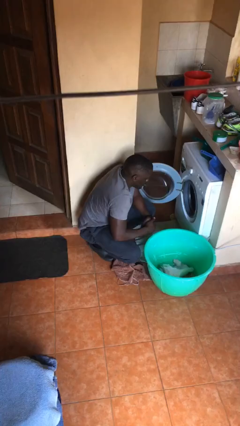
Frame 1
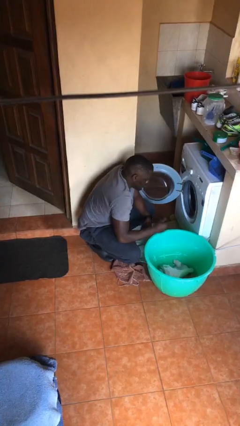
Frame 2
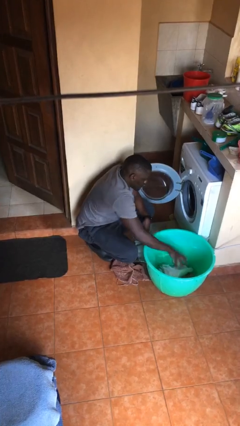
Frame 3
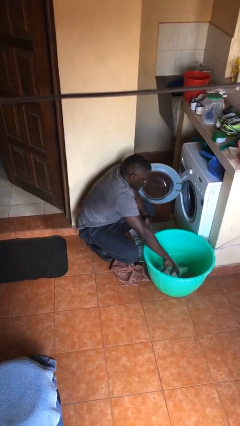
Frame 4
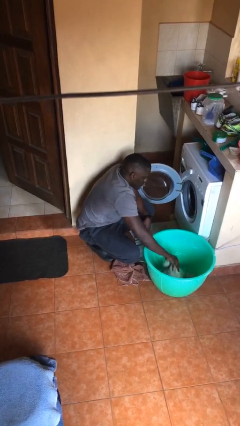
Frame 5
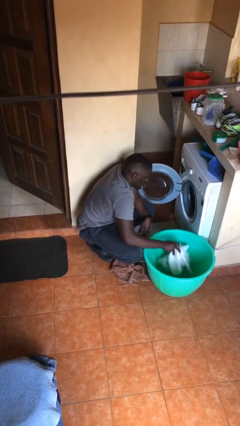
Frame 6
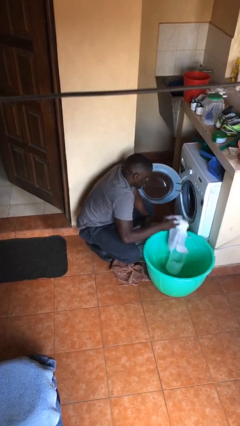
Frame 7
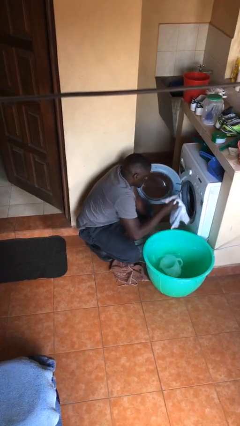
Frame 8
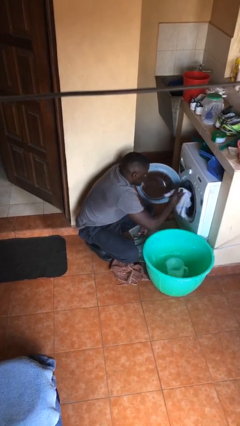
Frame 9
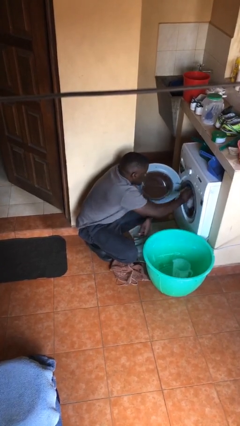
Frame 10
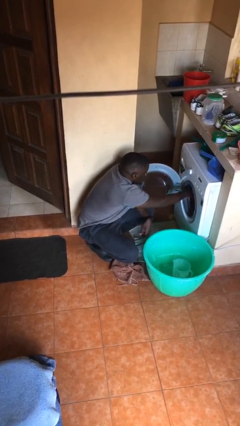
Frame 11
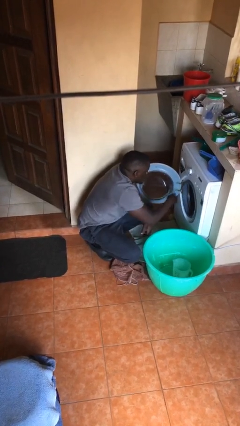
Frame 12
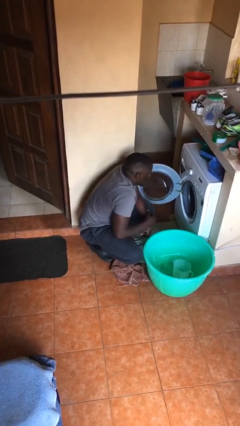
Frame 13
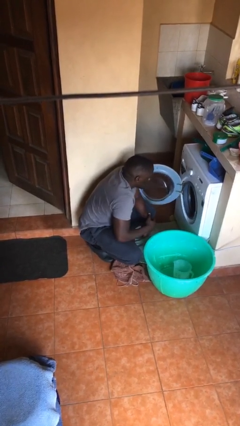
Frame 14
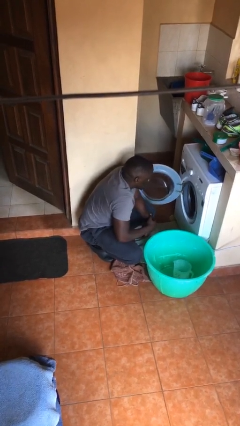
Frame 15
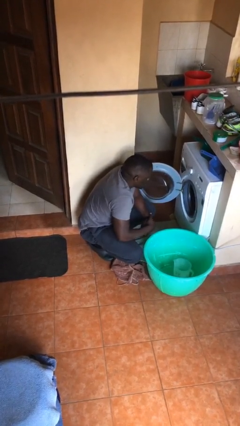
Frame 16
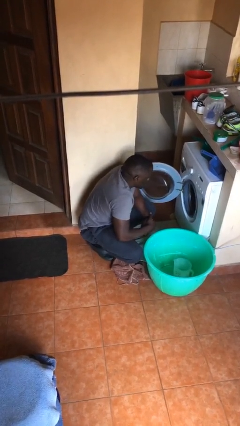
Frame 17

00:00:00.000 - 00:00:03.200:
person loads clotheswasher

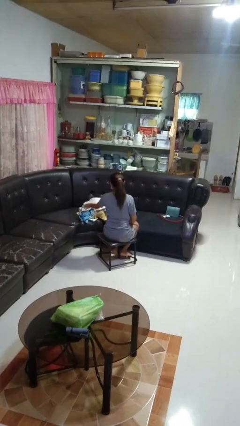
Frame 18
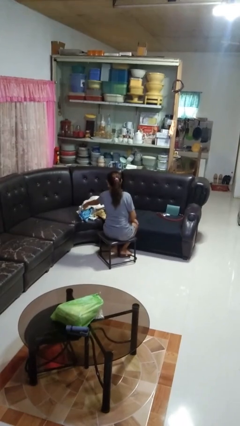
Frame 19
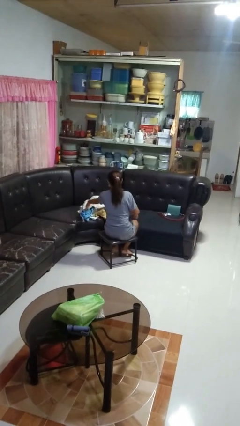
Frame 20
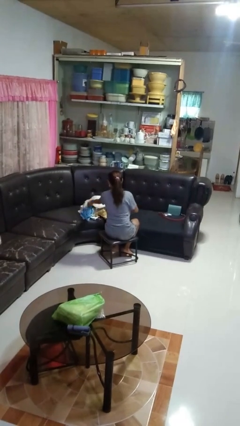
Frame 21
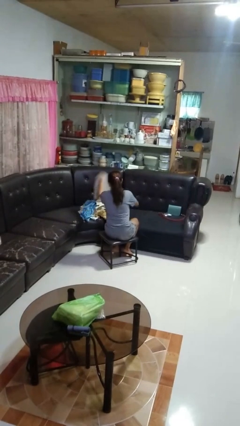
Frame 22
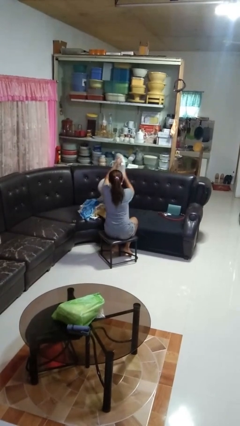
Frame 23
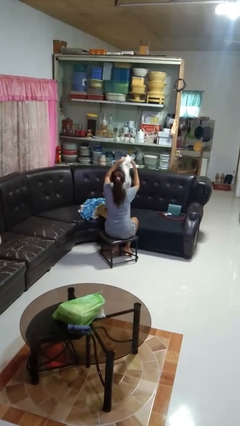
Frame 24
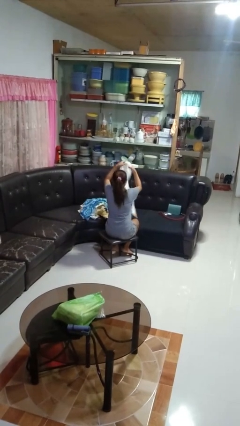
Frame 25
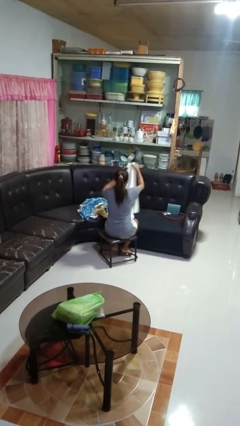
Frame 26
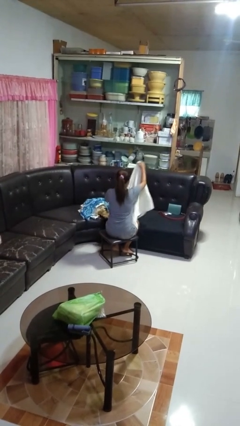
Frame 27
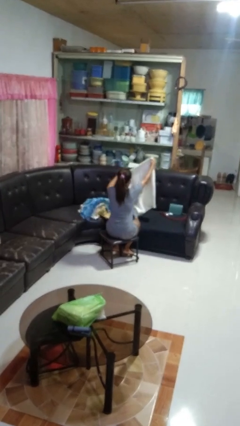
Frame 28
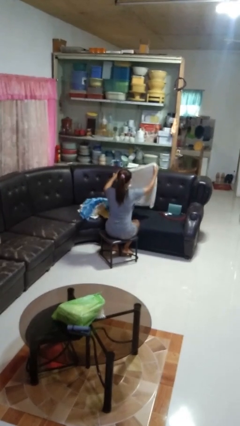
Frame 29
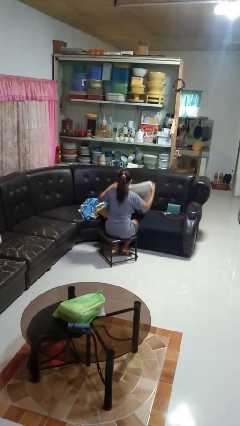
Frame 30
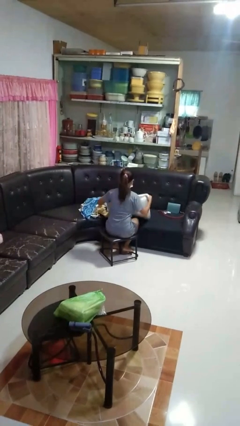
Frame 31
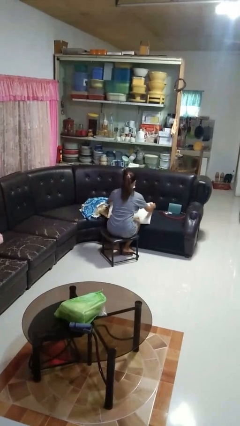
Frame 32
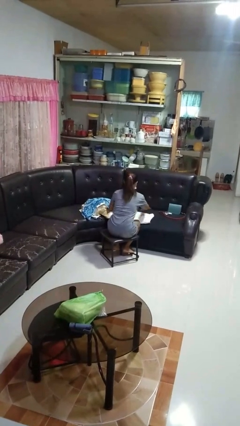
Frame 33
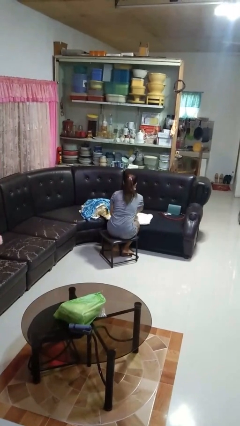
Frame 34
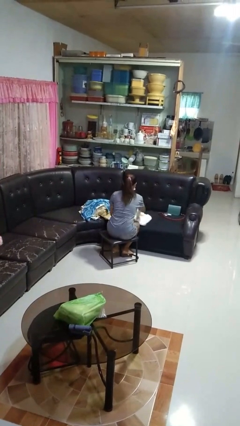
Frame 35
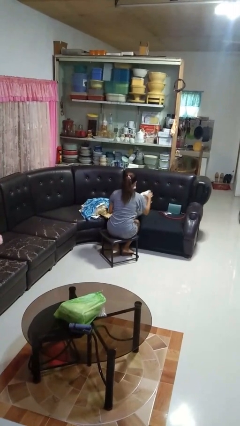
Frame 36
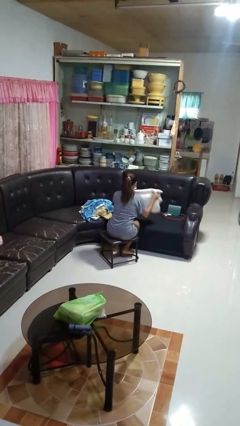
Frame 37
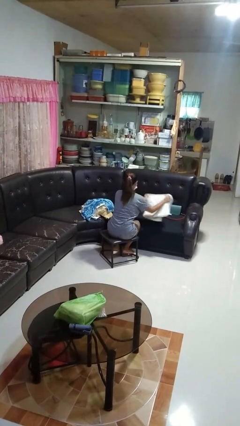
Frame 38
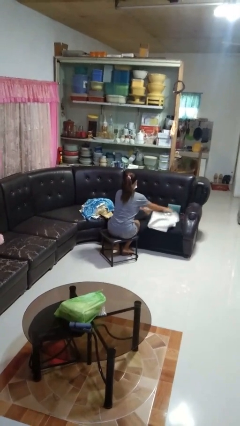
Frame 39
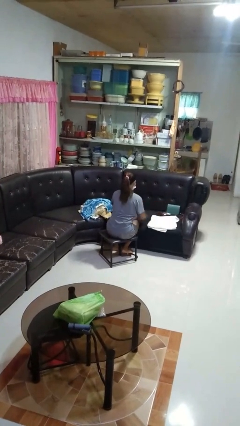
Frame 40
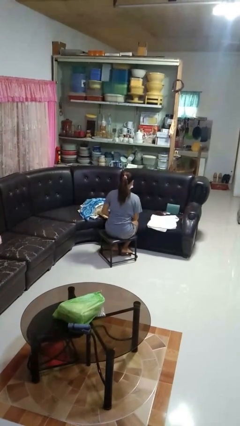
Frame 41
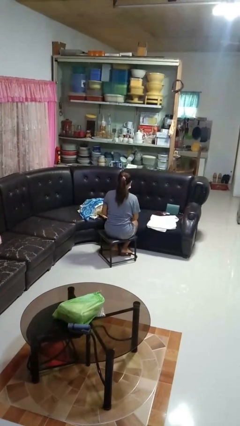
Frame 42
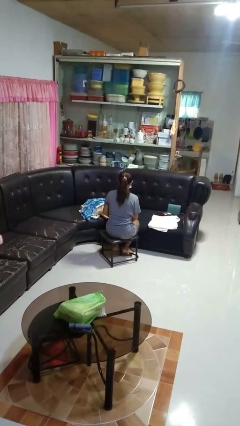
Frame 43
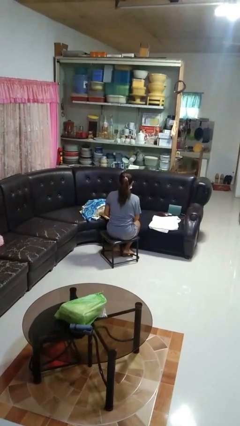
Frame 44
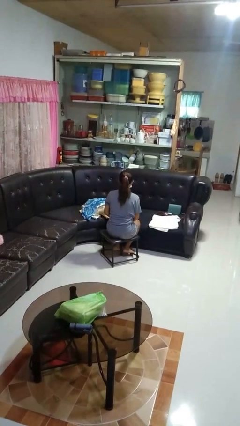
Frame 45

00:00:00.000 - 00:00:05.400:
person folds towel

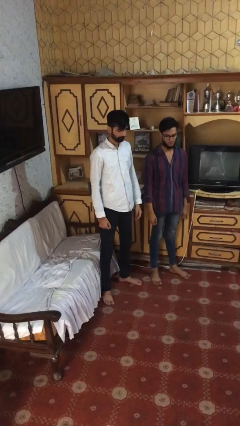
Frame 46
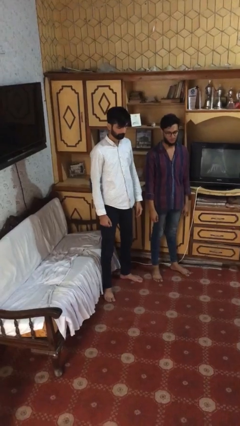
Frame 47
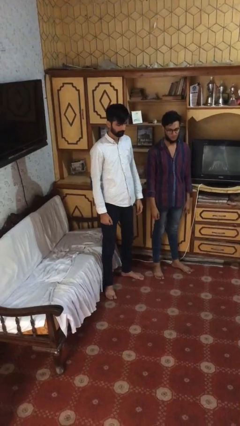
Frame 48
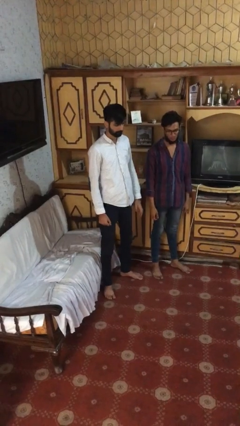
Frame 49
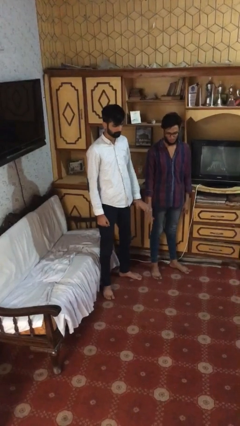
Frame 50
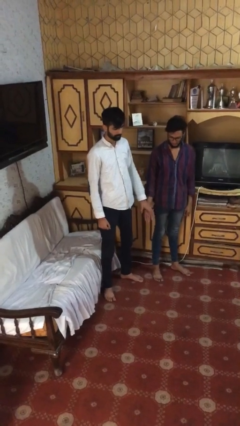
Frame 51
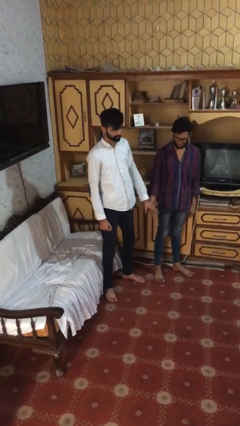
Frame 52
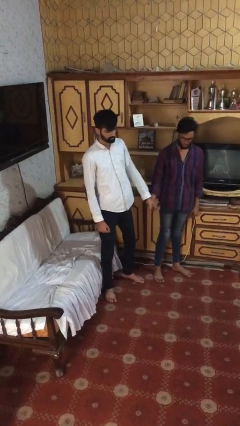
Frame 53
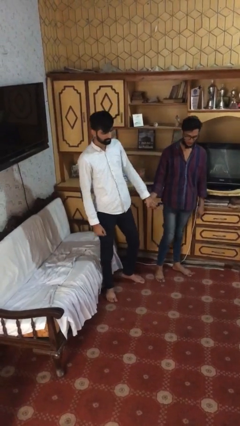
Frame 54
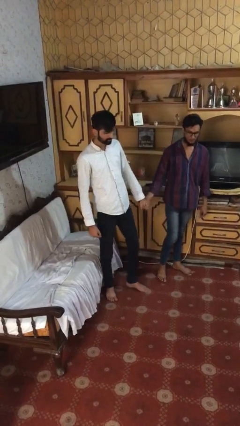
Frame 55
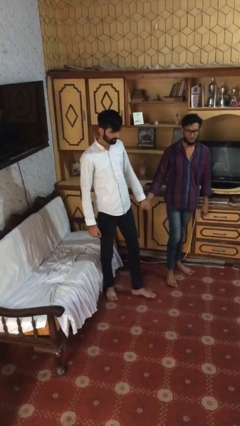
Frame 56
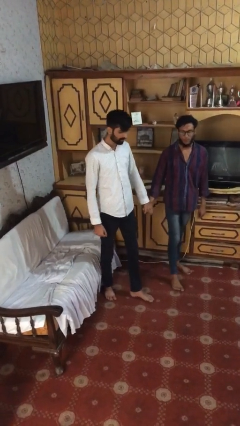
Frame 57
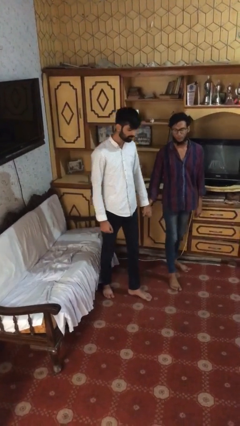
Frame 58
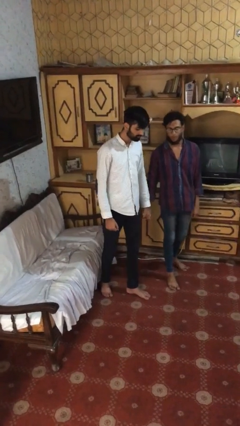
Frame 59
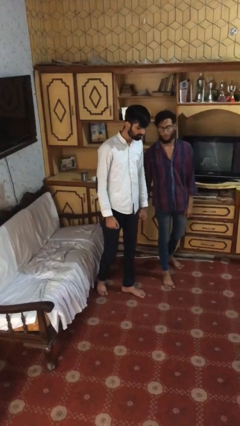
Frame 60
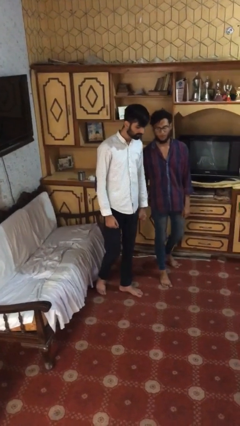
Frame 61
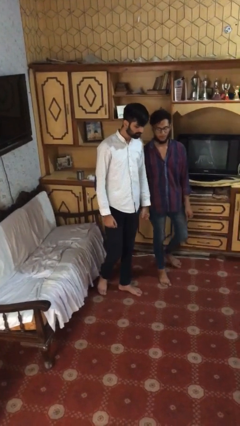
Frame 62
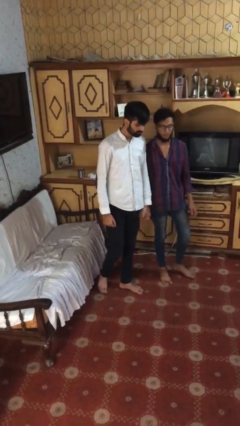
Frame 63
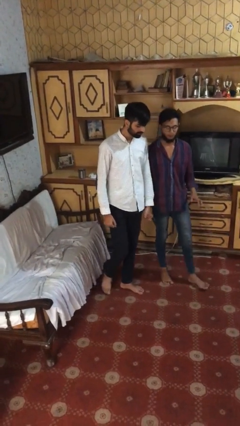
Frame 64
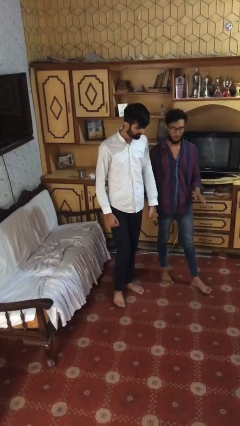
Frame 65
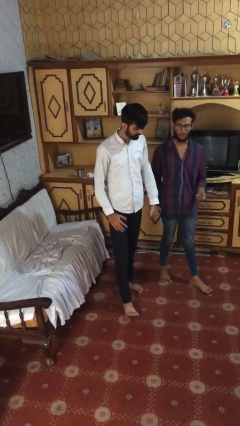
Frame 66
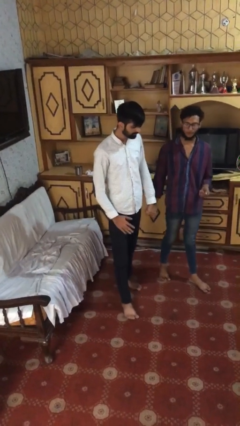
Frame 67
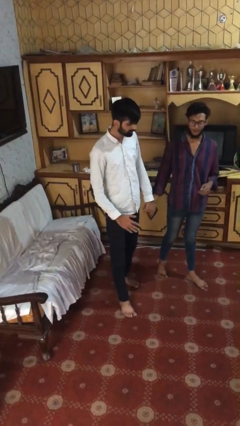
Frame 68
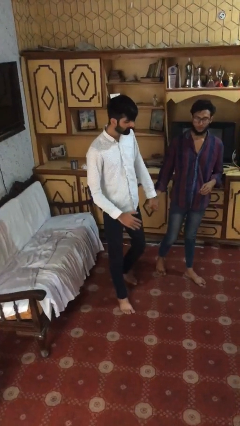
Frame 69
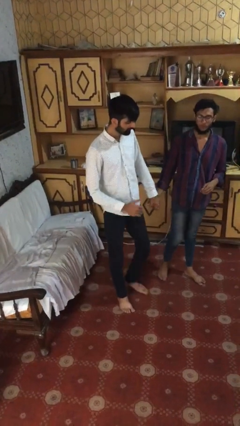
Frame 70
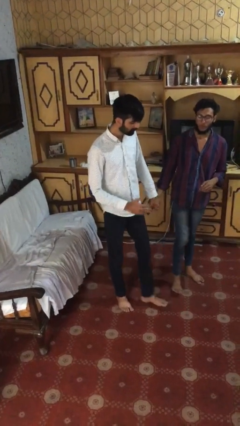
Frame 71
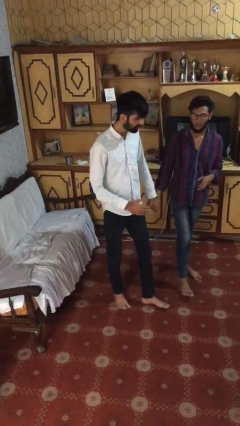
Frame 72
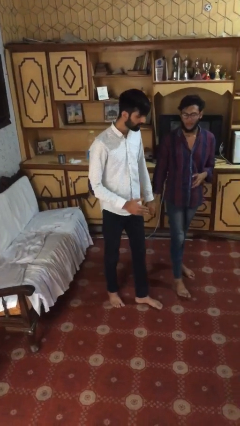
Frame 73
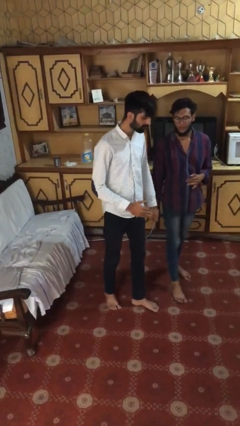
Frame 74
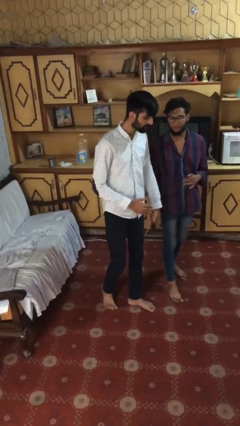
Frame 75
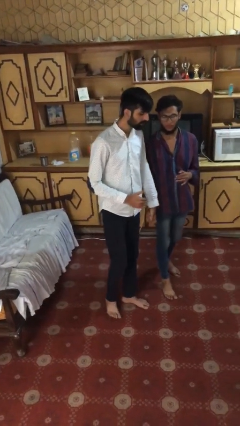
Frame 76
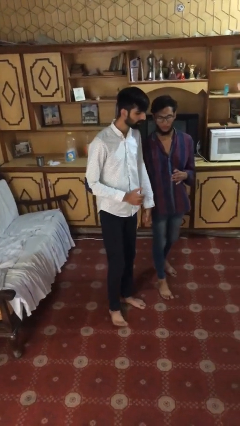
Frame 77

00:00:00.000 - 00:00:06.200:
person holds hand

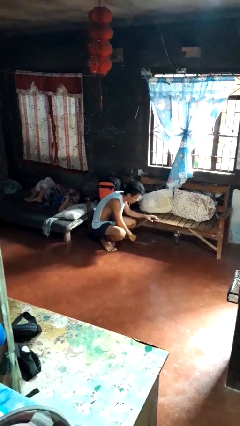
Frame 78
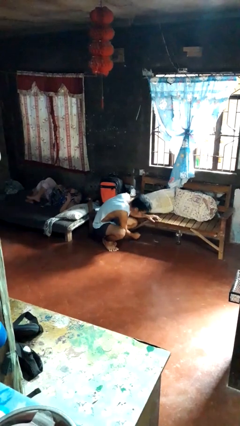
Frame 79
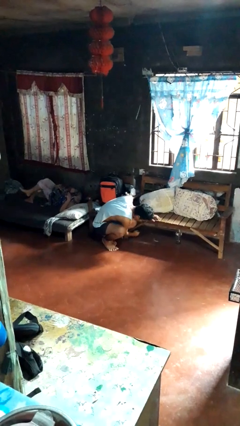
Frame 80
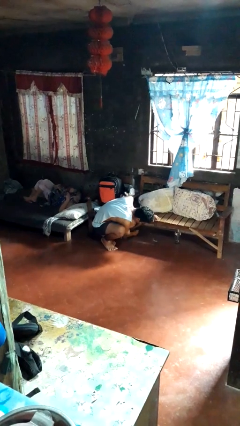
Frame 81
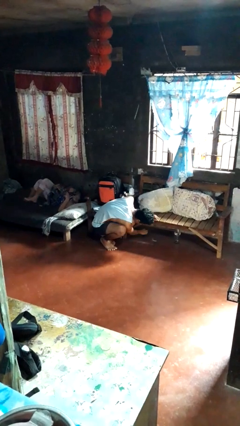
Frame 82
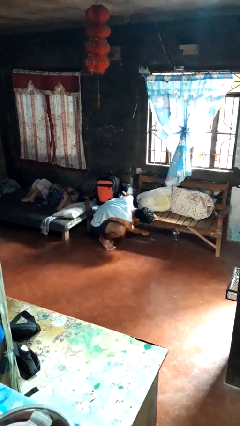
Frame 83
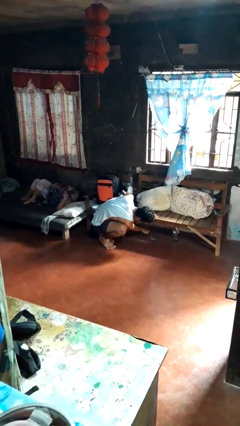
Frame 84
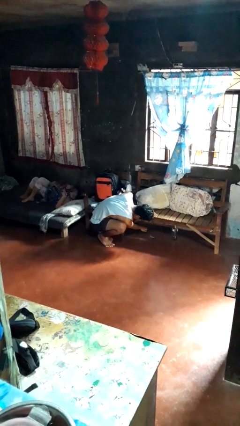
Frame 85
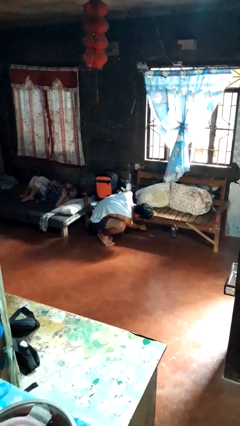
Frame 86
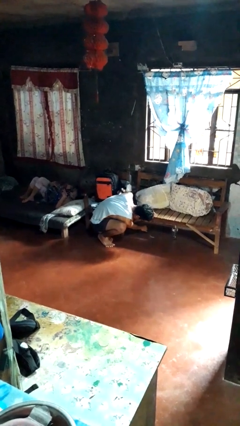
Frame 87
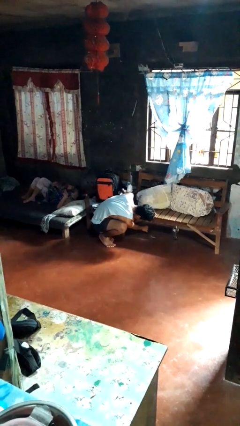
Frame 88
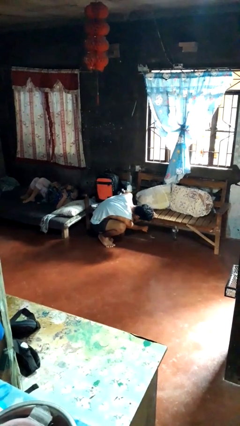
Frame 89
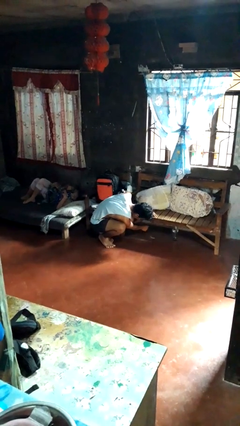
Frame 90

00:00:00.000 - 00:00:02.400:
person searches under couch

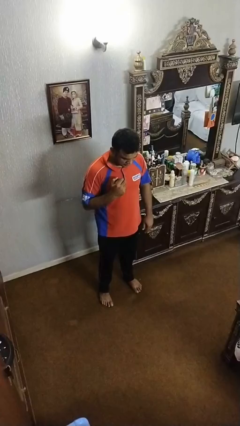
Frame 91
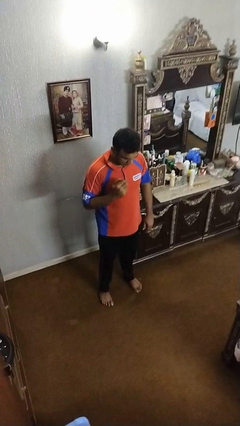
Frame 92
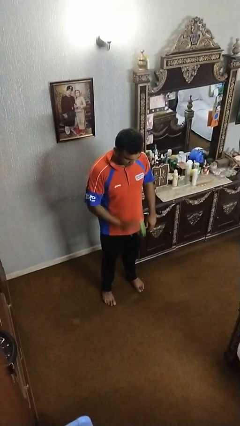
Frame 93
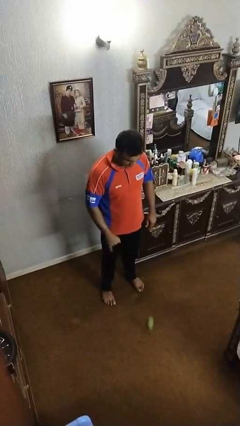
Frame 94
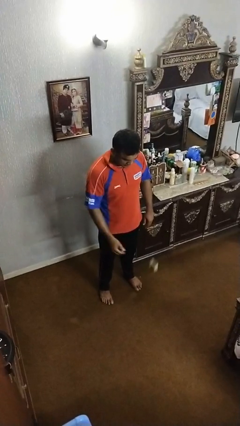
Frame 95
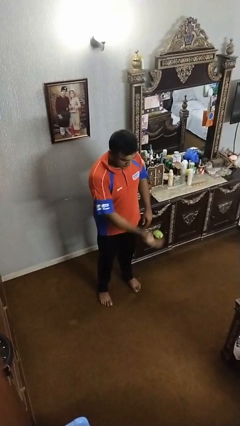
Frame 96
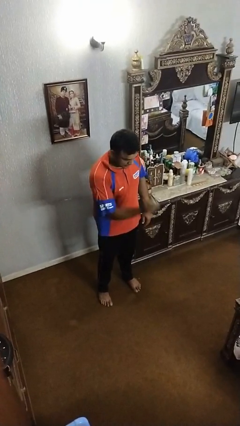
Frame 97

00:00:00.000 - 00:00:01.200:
person bounces ball on floor
